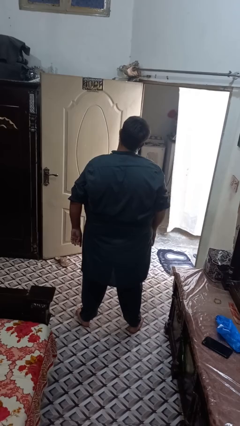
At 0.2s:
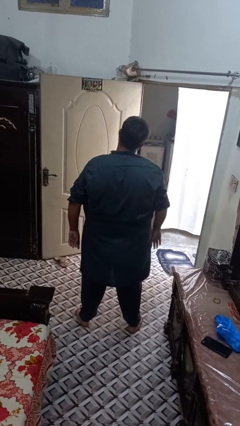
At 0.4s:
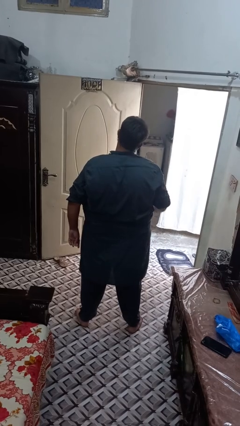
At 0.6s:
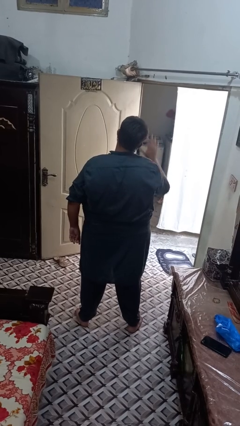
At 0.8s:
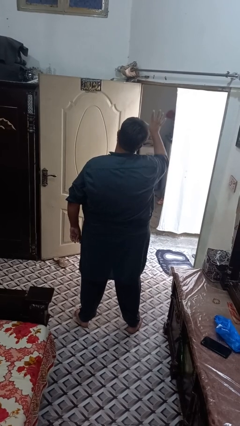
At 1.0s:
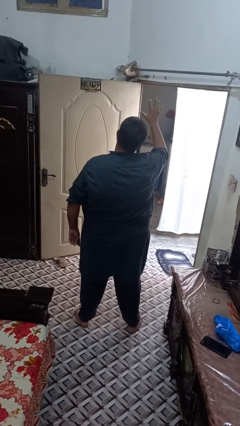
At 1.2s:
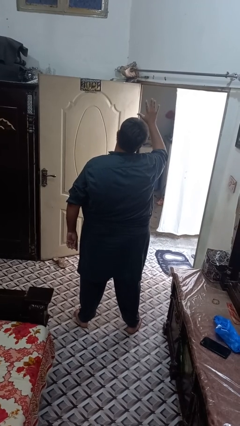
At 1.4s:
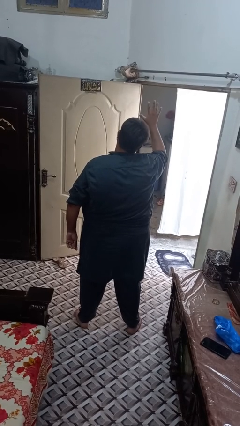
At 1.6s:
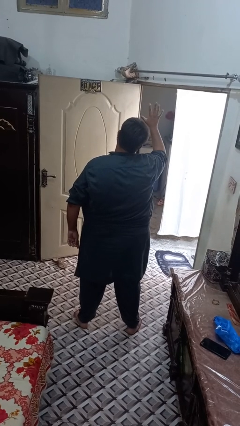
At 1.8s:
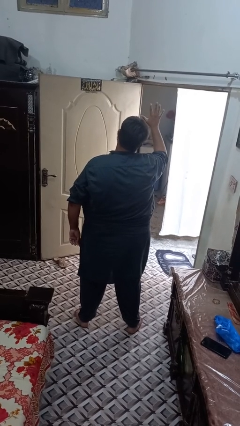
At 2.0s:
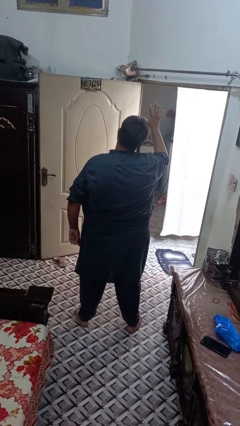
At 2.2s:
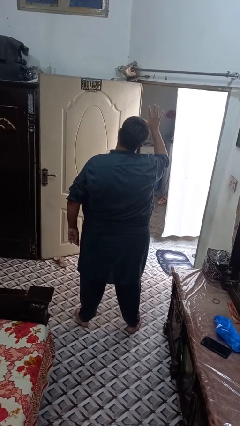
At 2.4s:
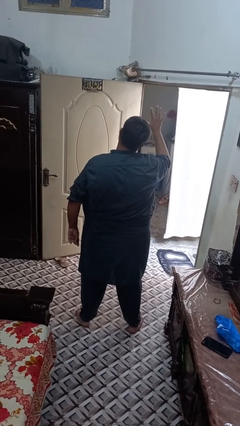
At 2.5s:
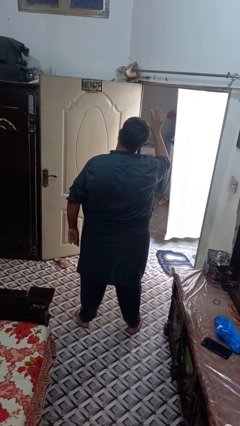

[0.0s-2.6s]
person gestures number five

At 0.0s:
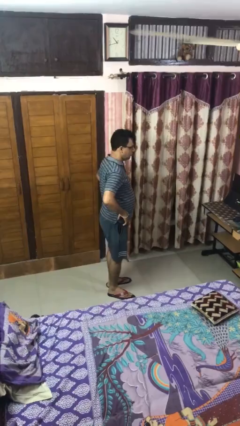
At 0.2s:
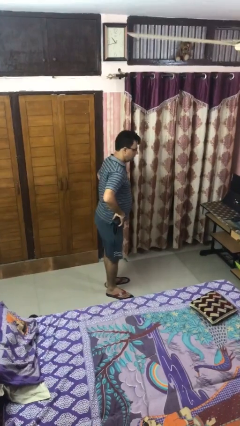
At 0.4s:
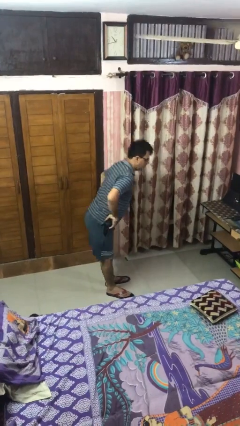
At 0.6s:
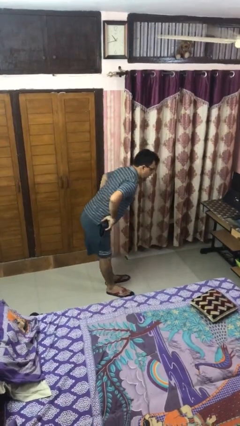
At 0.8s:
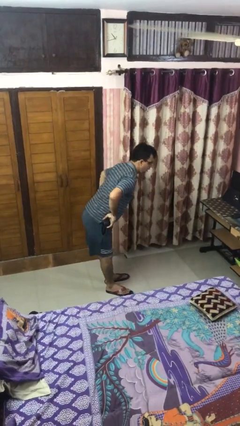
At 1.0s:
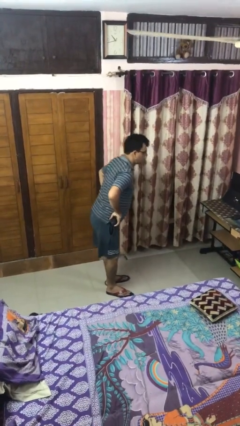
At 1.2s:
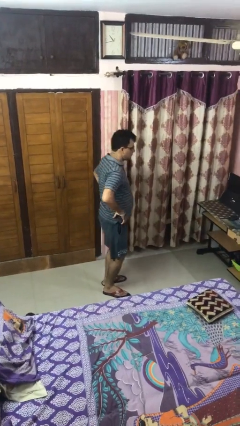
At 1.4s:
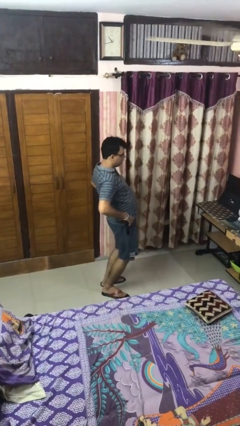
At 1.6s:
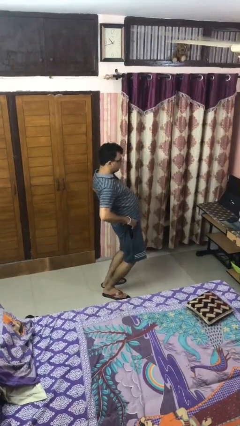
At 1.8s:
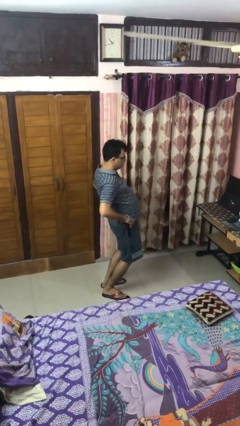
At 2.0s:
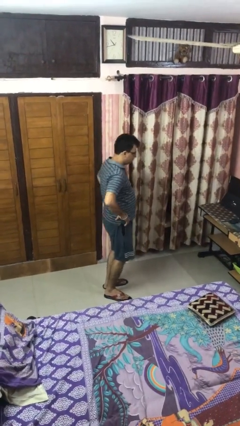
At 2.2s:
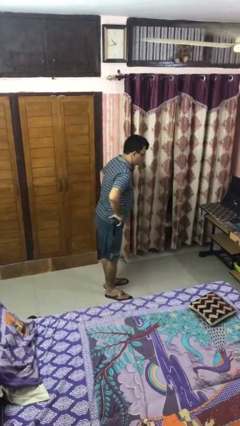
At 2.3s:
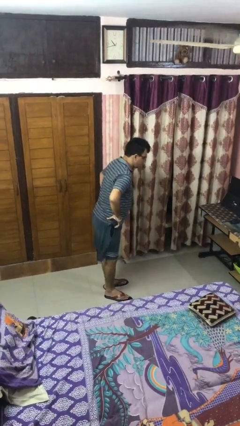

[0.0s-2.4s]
person wiggles hips

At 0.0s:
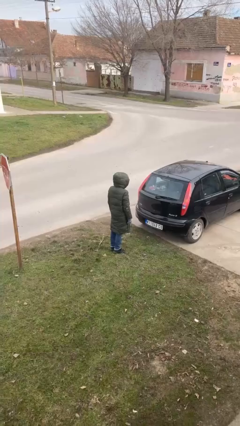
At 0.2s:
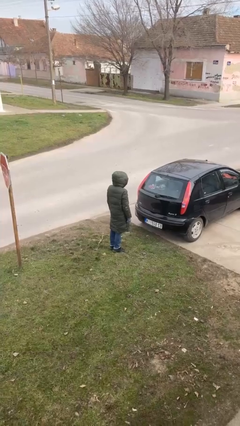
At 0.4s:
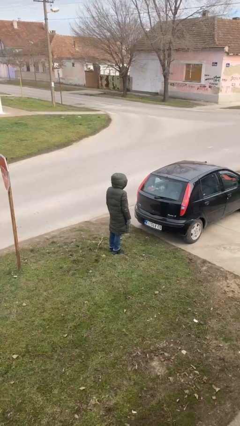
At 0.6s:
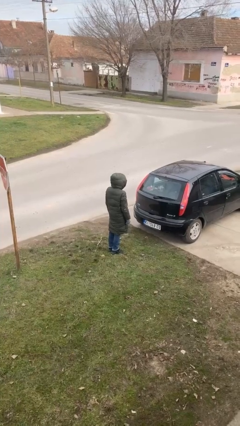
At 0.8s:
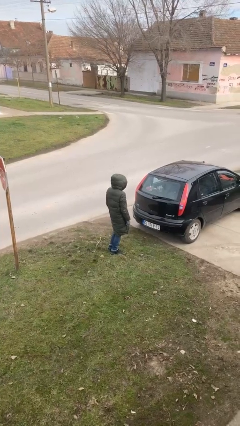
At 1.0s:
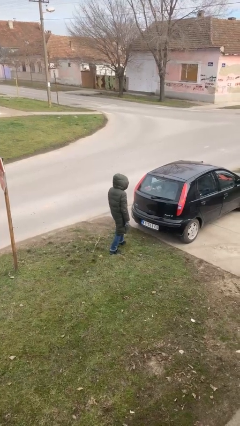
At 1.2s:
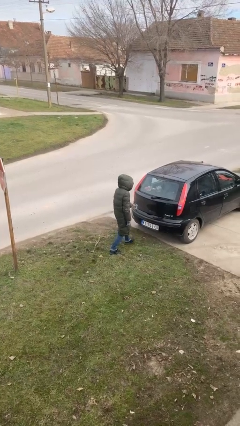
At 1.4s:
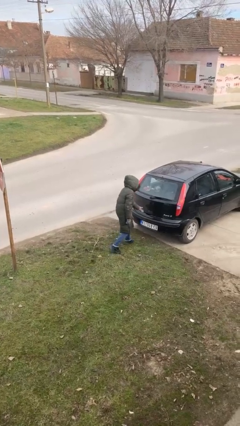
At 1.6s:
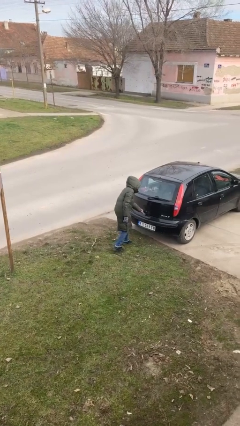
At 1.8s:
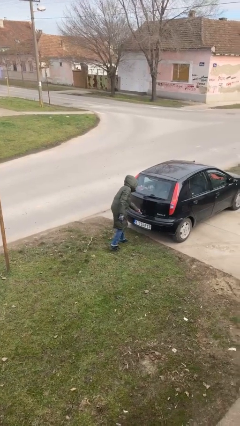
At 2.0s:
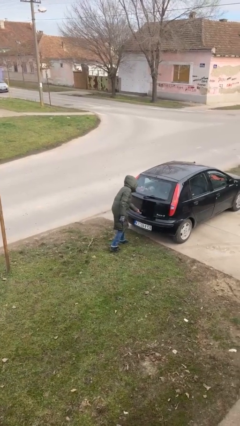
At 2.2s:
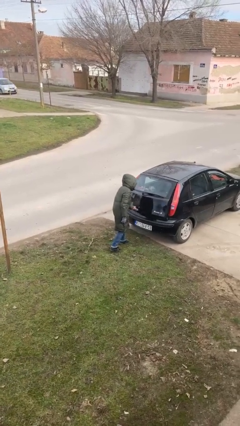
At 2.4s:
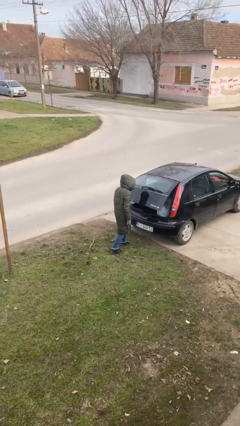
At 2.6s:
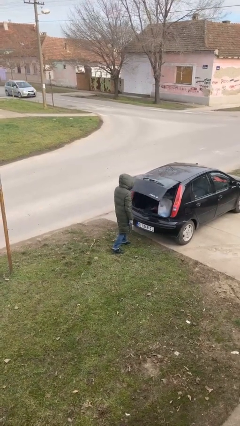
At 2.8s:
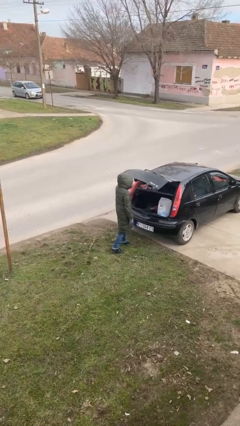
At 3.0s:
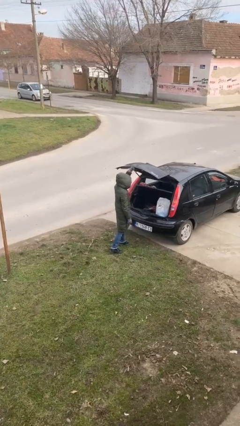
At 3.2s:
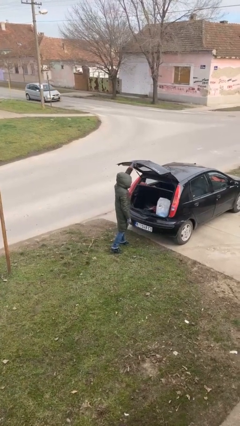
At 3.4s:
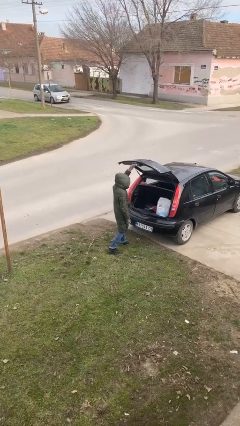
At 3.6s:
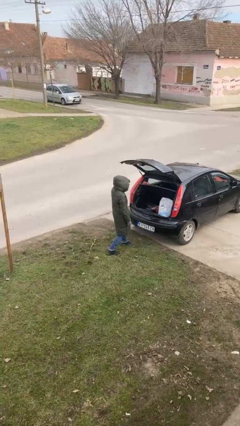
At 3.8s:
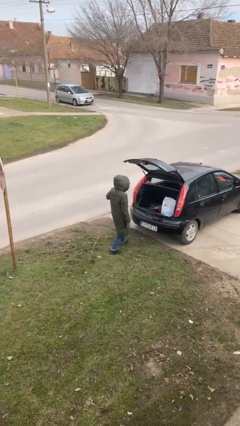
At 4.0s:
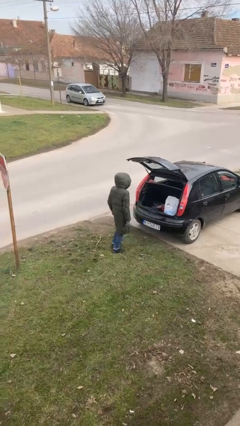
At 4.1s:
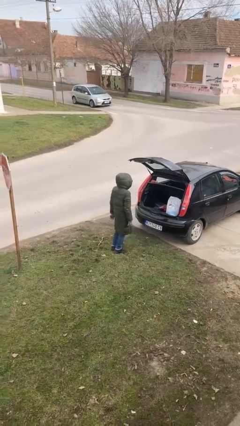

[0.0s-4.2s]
person opens car trunk

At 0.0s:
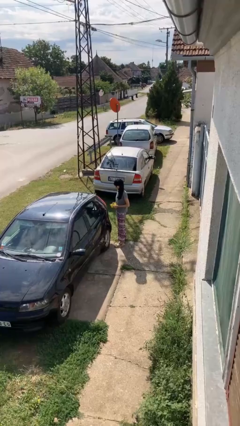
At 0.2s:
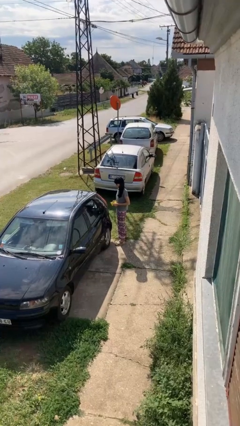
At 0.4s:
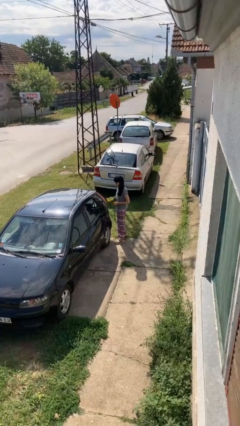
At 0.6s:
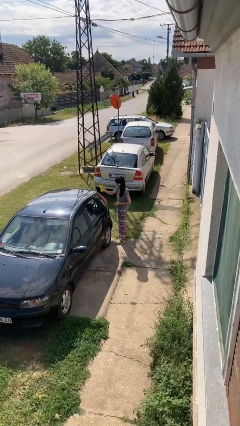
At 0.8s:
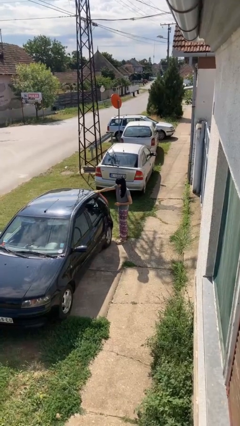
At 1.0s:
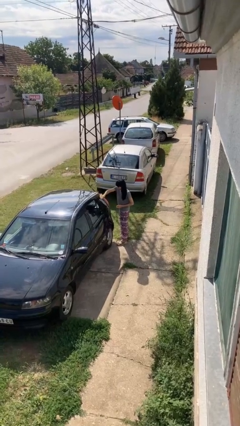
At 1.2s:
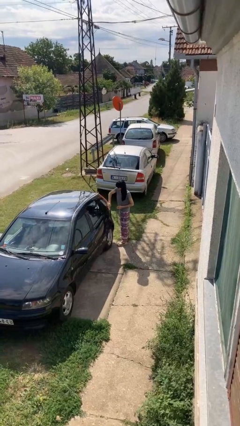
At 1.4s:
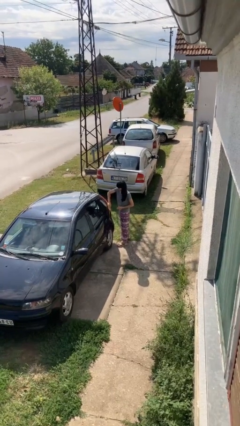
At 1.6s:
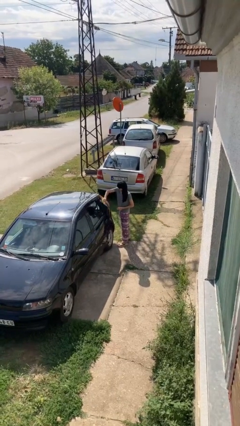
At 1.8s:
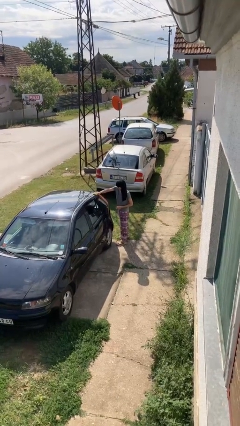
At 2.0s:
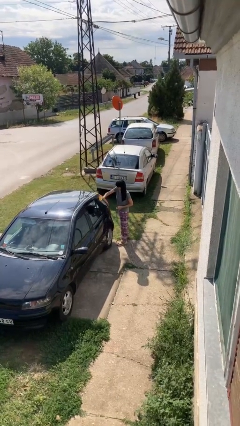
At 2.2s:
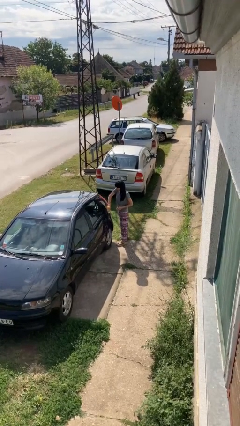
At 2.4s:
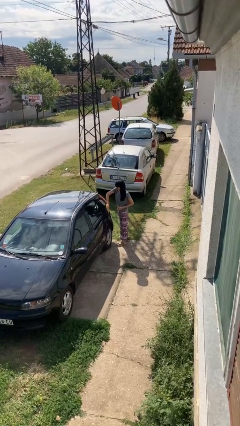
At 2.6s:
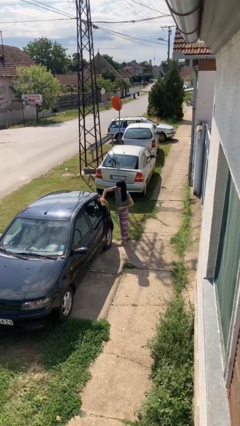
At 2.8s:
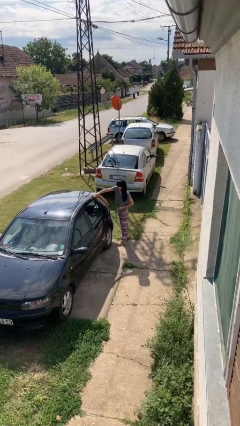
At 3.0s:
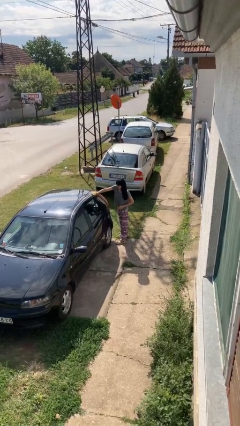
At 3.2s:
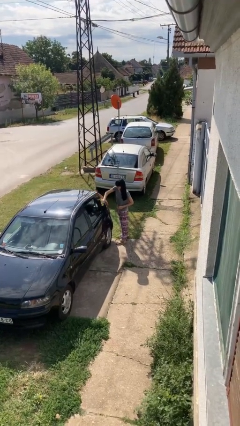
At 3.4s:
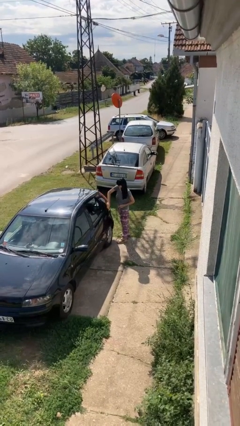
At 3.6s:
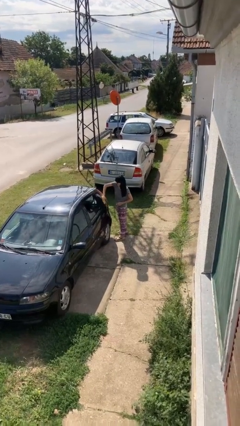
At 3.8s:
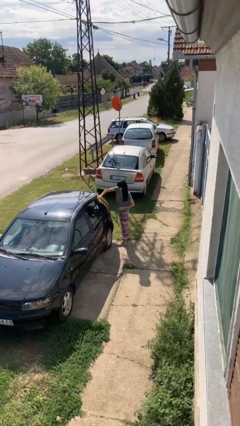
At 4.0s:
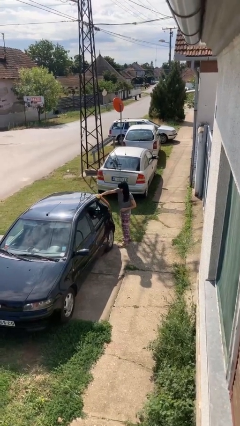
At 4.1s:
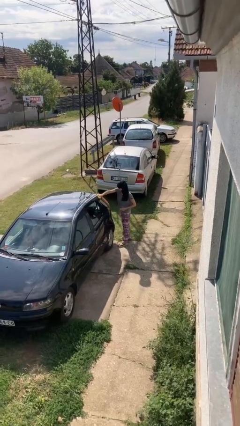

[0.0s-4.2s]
person polishes car with rag

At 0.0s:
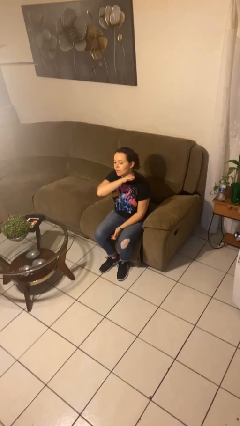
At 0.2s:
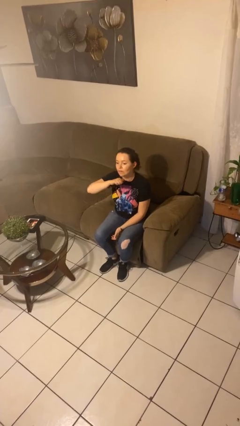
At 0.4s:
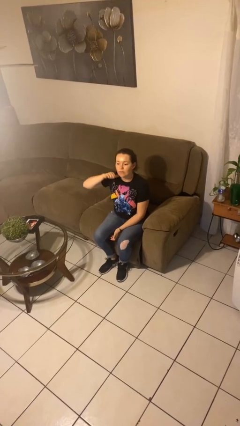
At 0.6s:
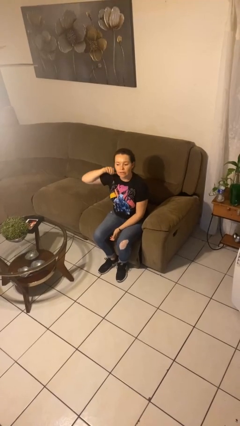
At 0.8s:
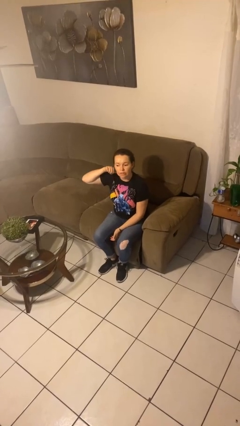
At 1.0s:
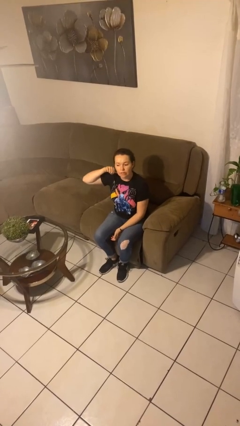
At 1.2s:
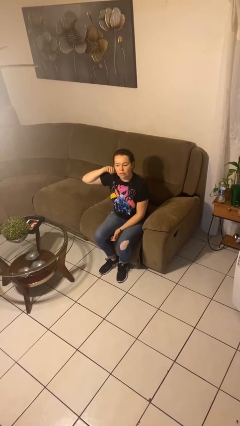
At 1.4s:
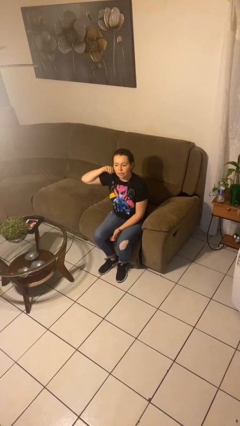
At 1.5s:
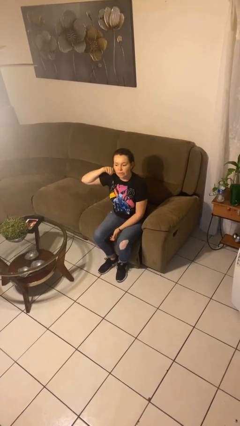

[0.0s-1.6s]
person gestures cut

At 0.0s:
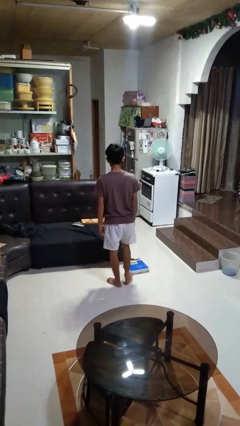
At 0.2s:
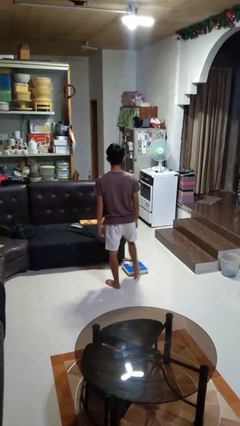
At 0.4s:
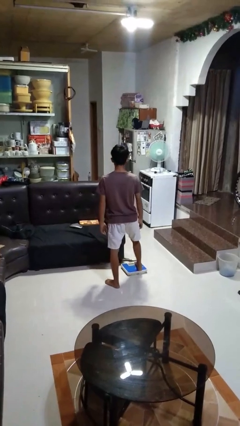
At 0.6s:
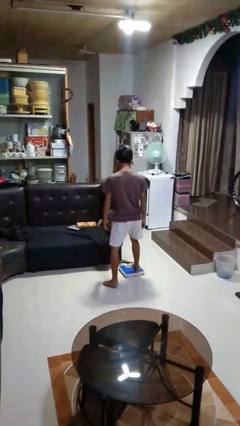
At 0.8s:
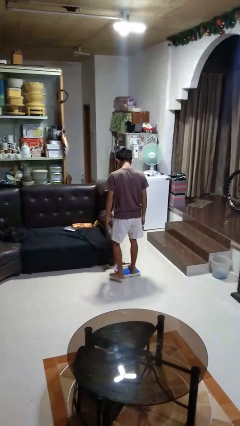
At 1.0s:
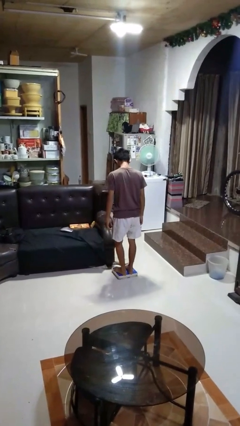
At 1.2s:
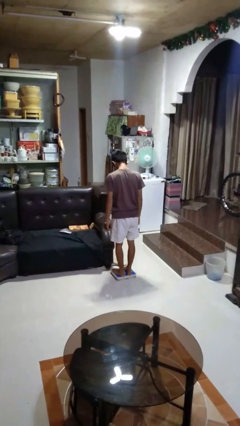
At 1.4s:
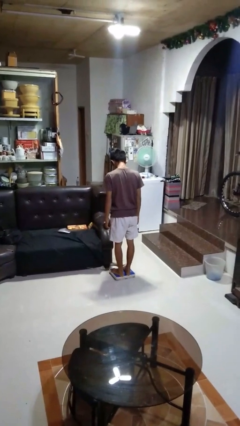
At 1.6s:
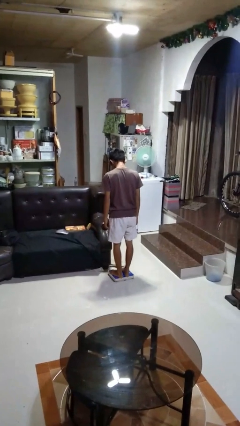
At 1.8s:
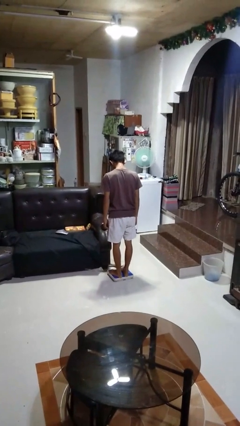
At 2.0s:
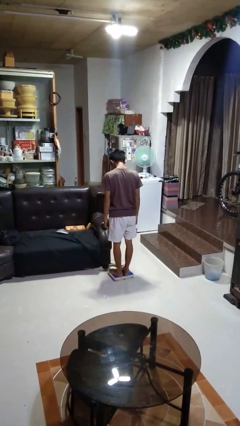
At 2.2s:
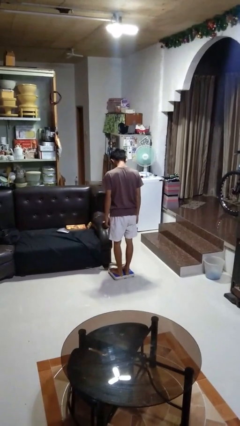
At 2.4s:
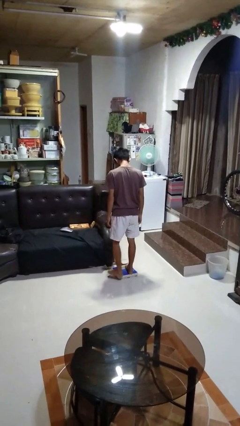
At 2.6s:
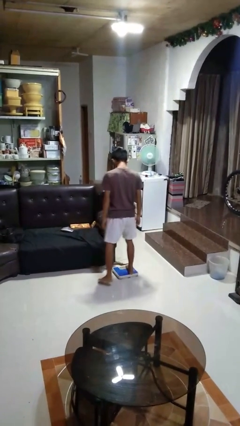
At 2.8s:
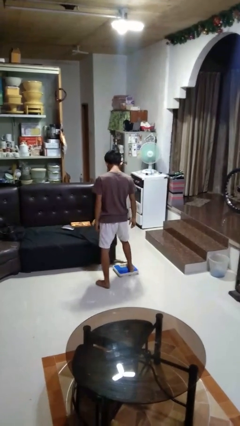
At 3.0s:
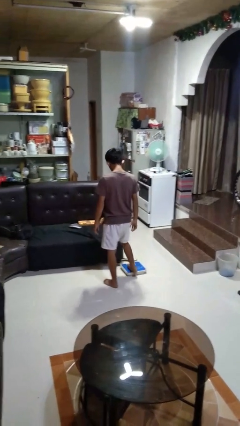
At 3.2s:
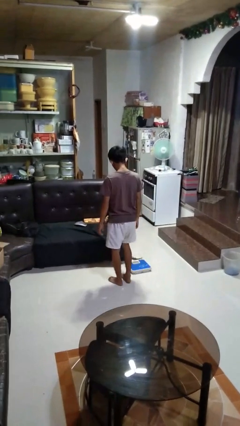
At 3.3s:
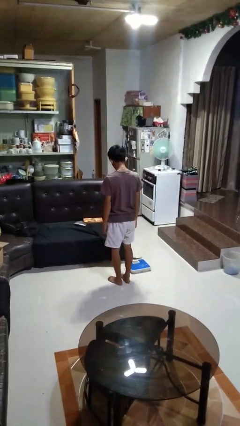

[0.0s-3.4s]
person uses bodyweight scale
